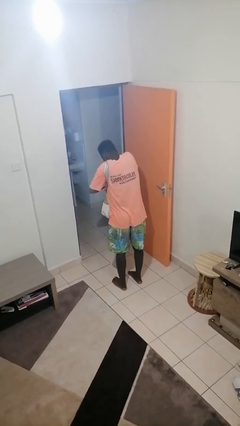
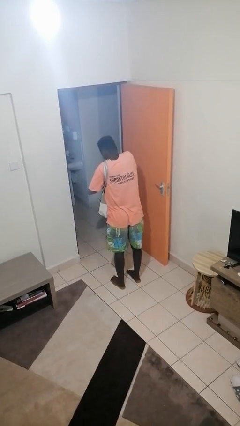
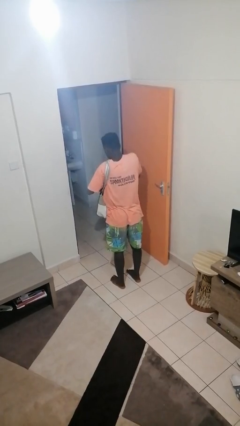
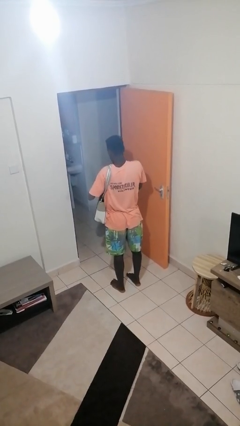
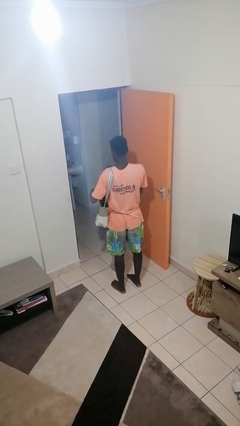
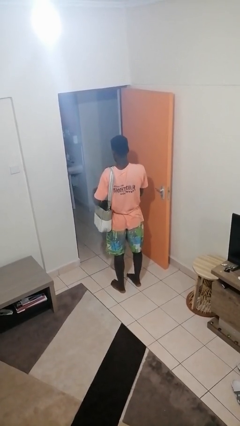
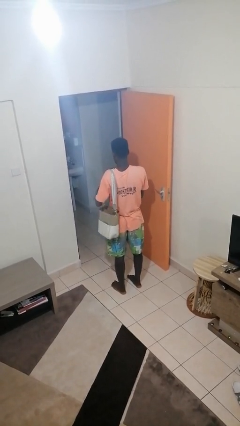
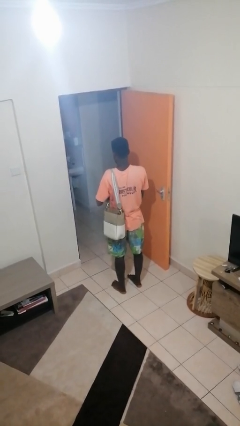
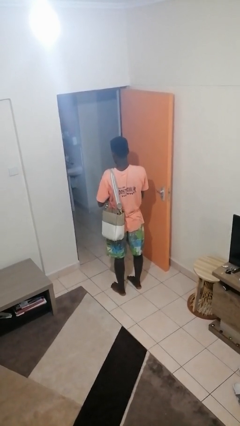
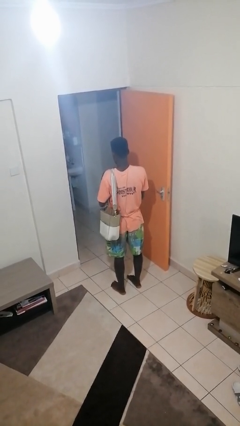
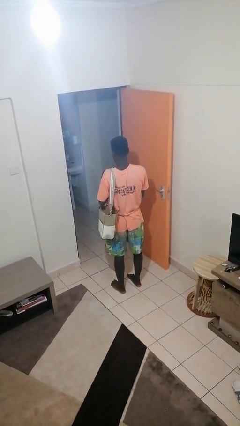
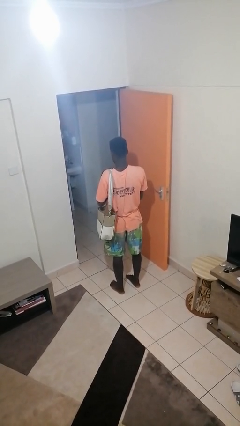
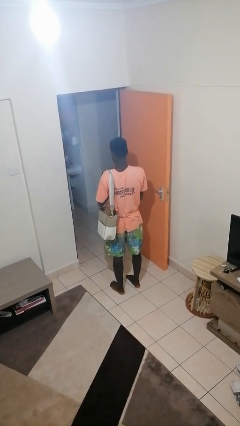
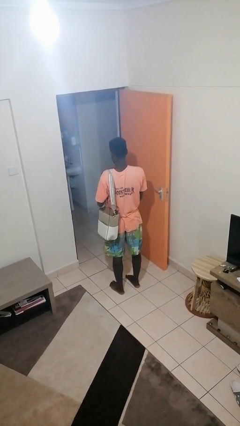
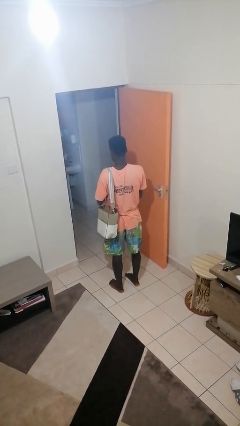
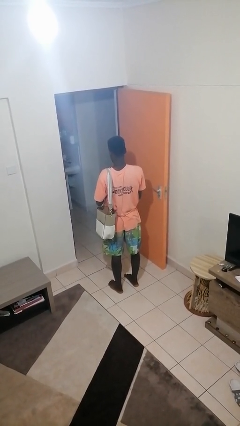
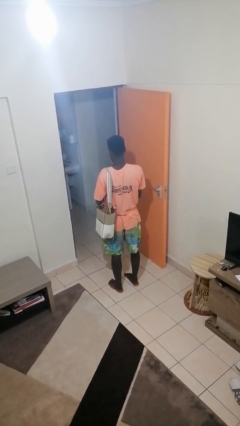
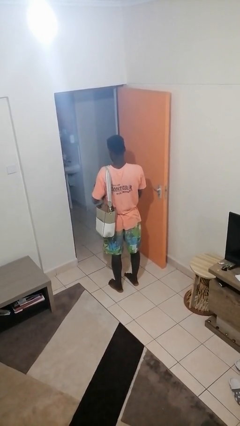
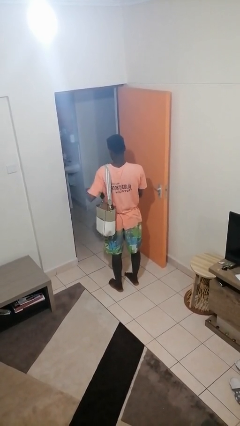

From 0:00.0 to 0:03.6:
person takes object from purse

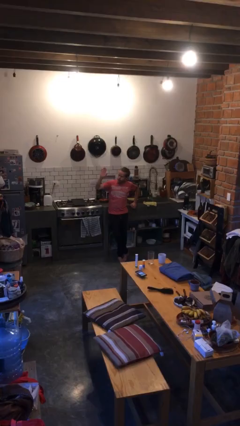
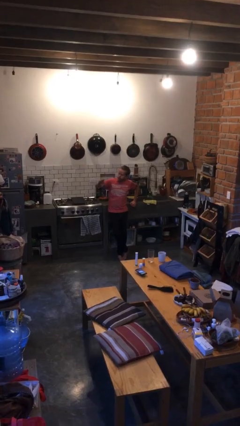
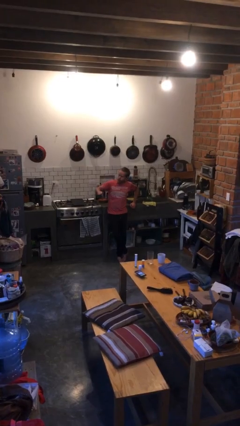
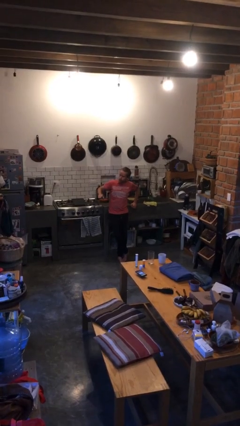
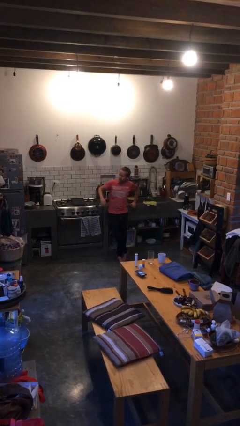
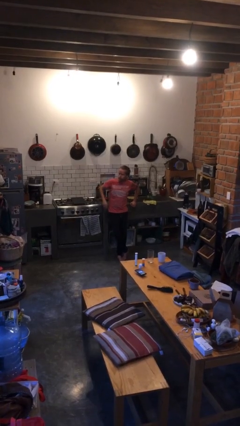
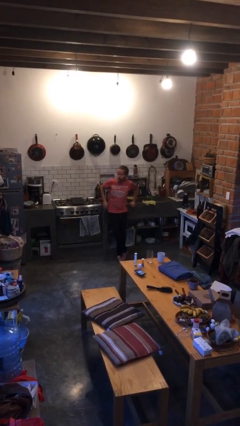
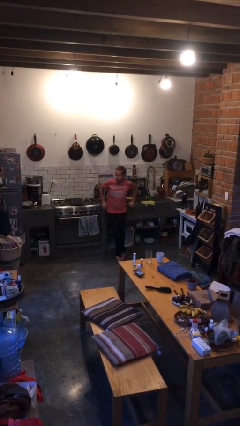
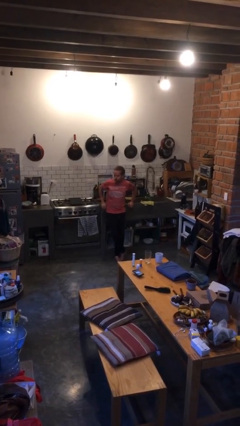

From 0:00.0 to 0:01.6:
person gestures lower hand

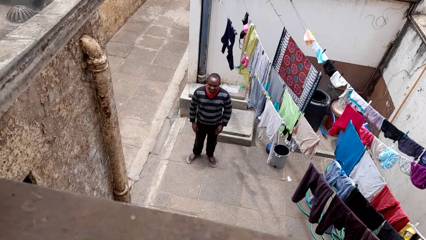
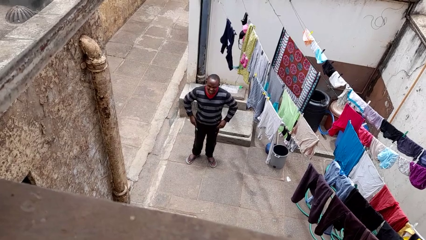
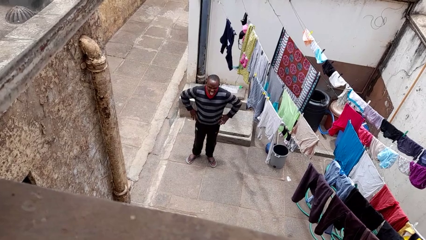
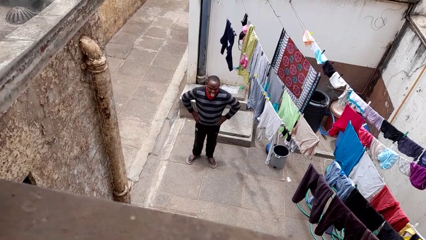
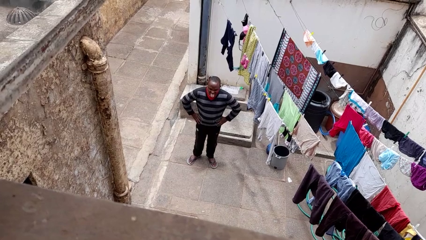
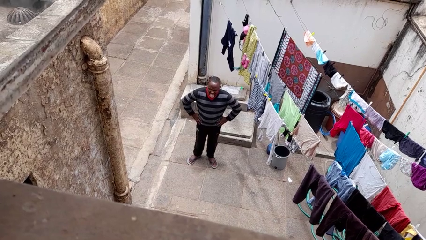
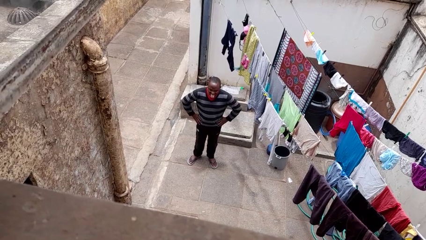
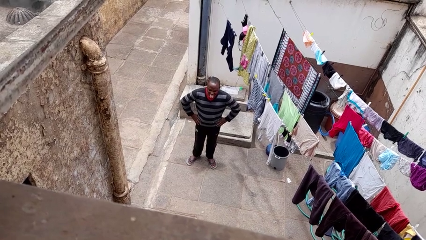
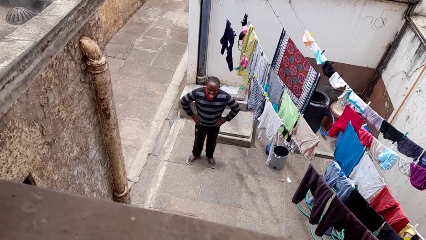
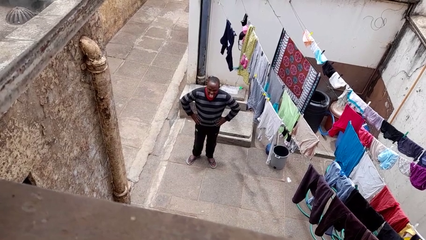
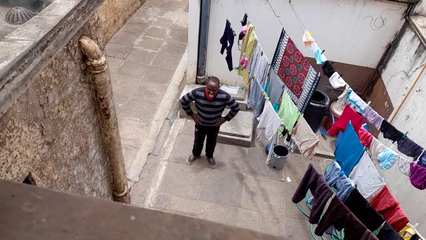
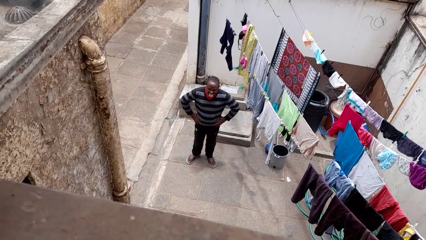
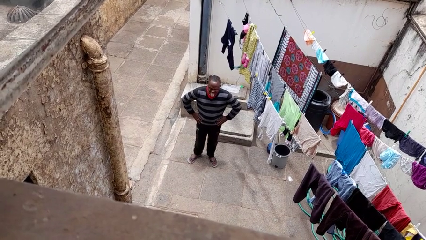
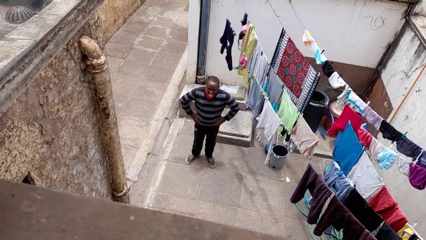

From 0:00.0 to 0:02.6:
person sticks out tongue

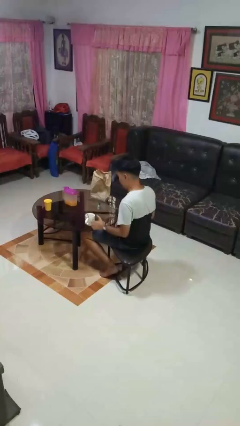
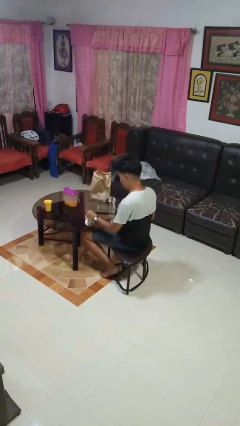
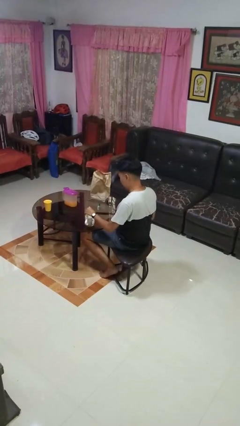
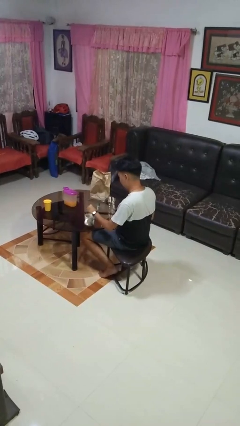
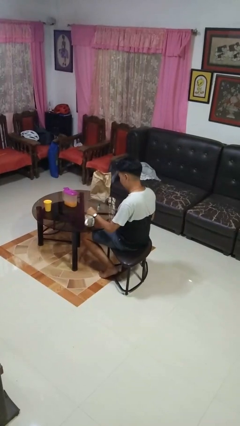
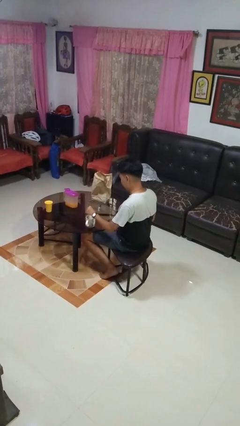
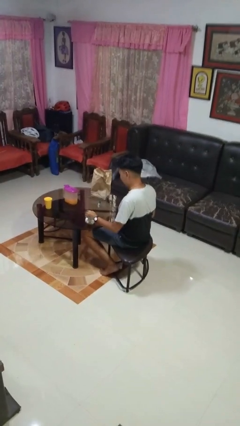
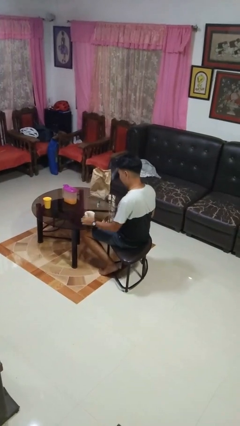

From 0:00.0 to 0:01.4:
person stirs mug

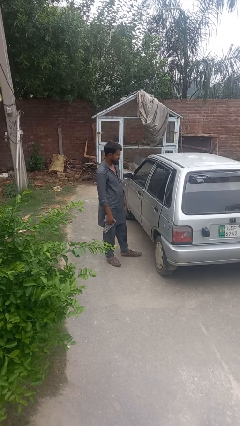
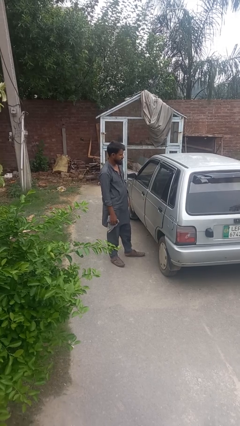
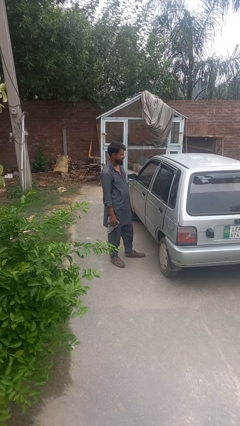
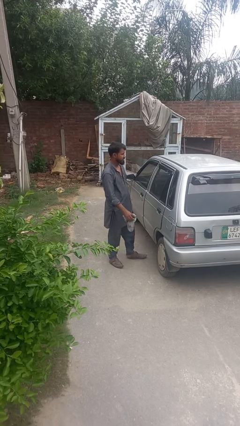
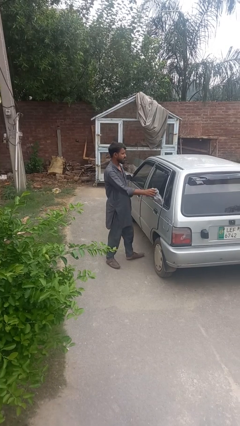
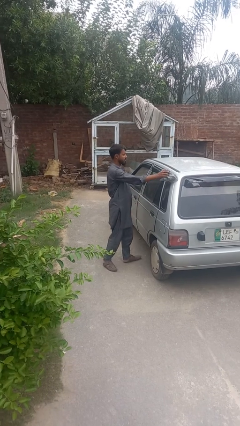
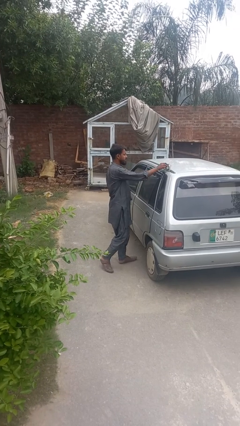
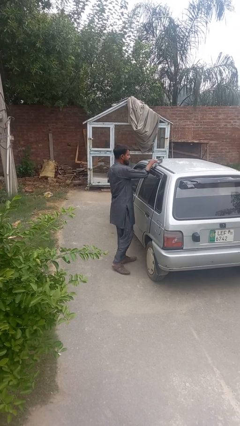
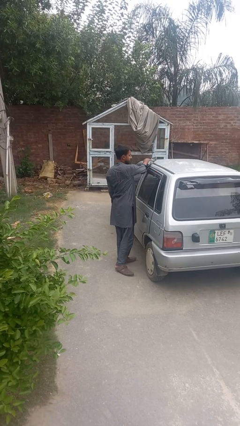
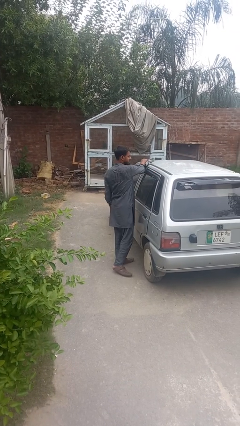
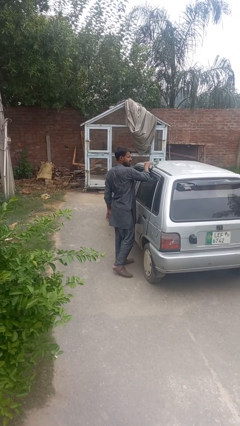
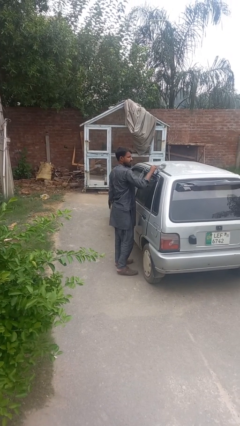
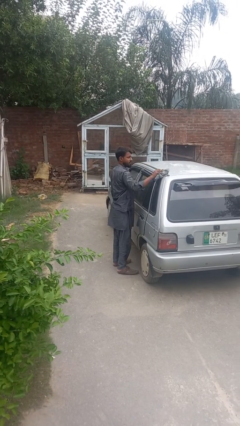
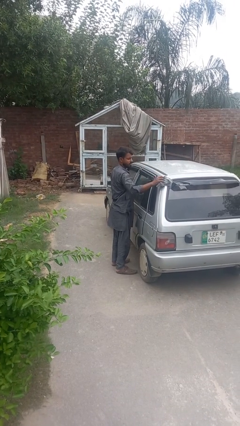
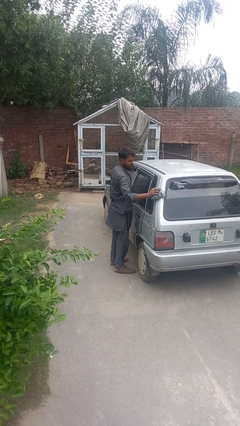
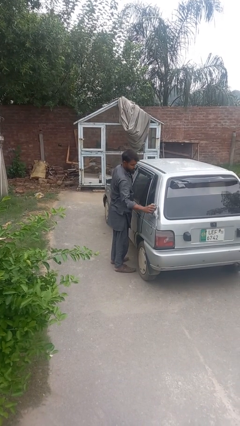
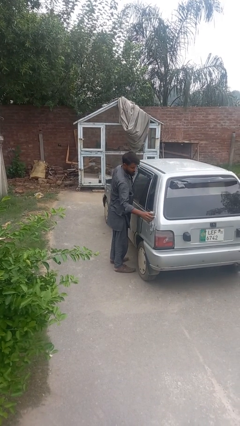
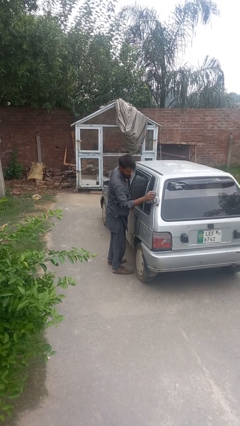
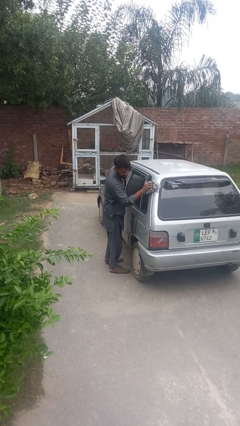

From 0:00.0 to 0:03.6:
person polishes car with rag

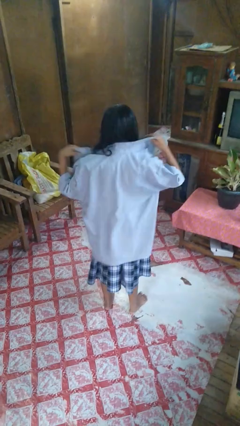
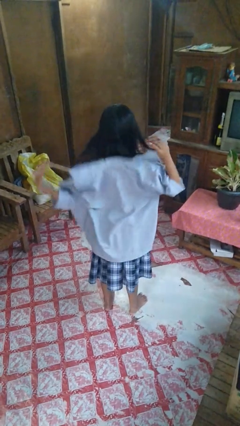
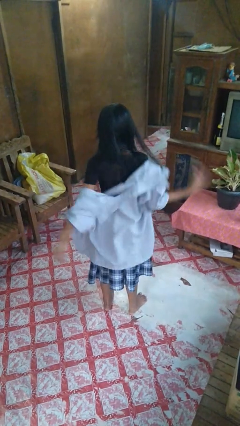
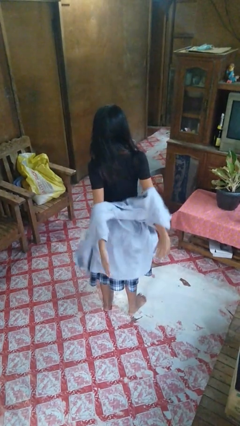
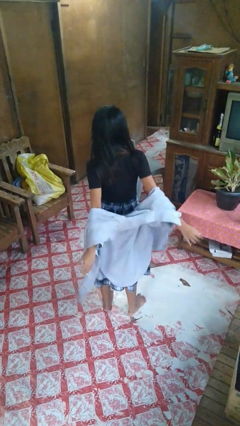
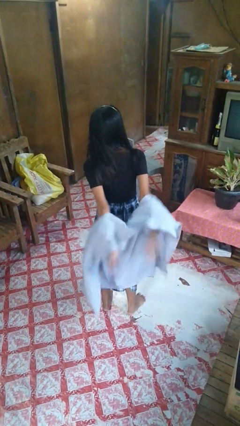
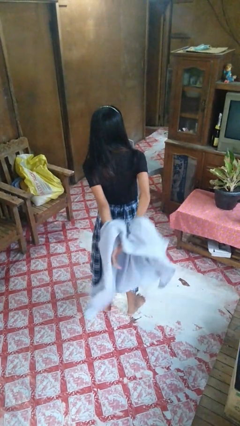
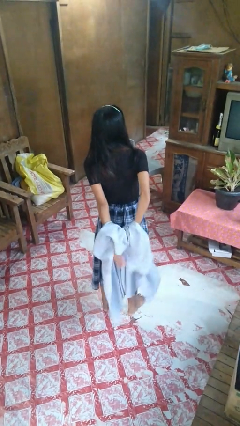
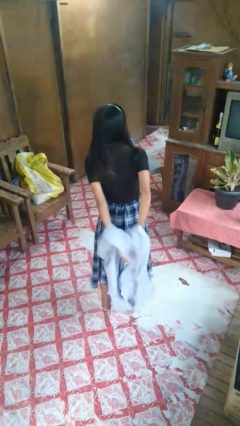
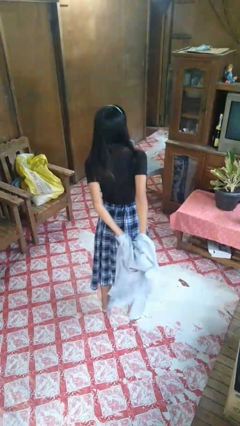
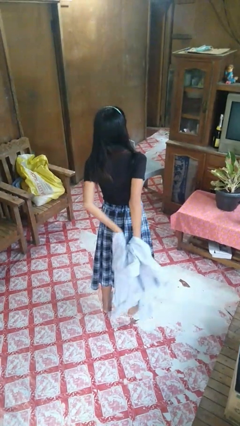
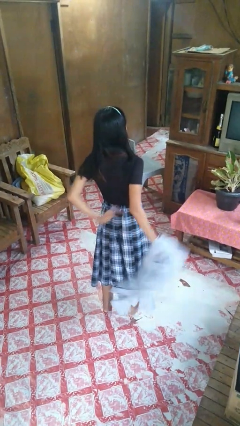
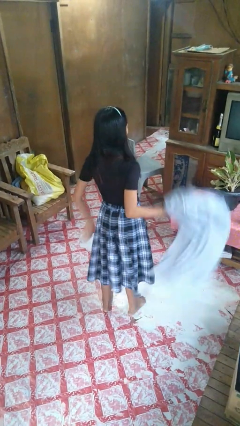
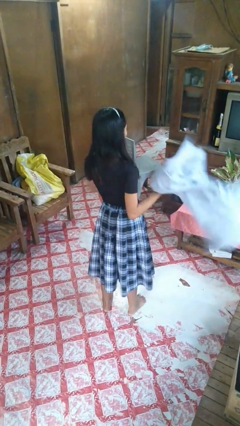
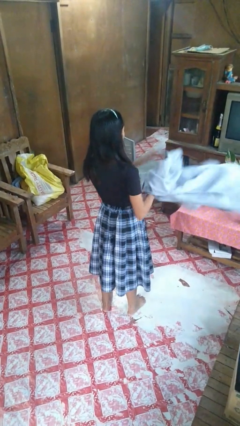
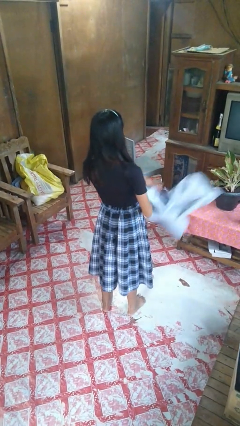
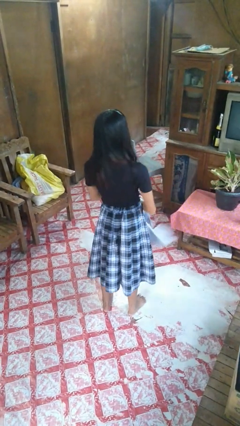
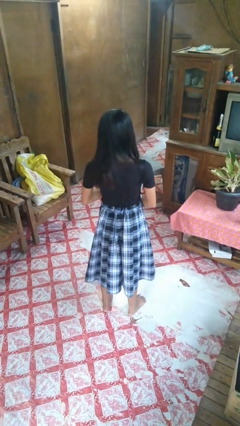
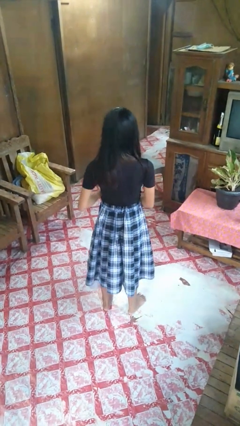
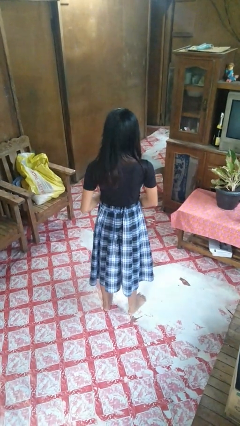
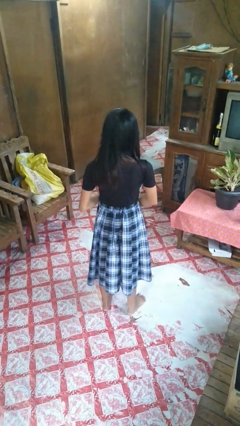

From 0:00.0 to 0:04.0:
person takes off shirt
